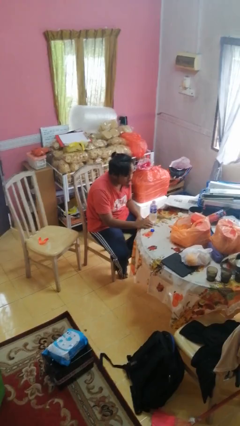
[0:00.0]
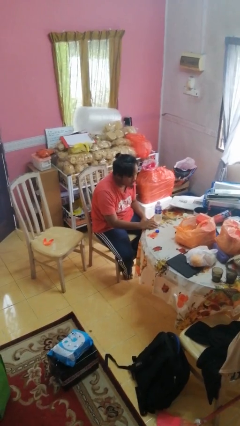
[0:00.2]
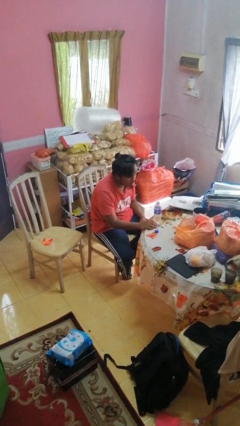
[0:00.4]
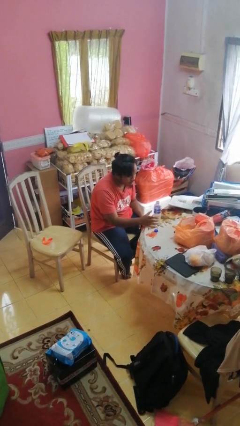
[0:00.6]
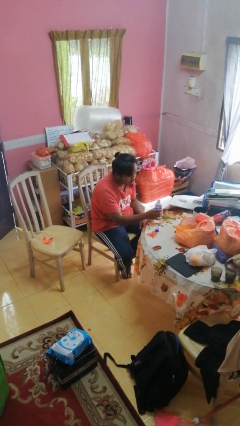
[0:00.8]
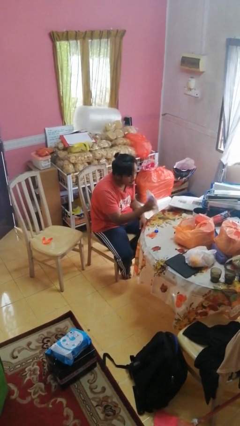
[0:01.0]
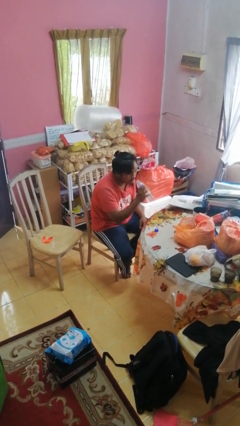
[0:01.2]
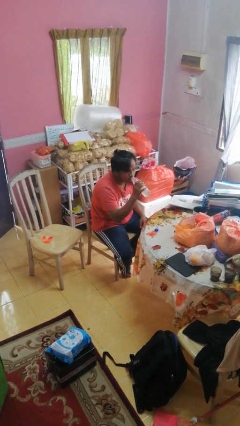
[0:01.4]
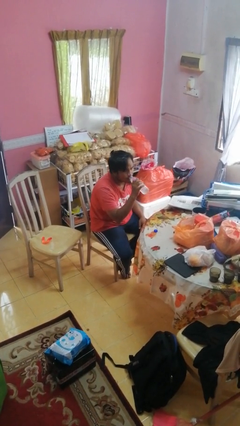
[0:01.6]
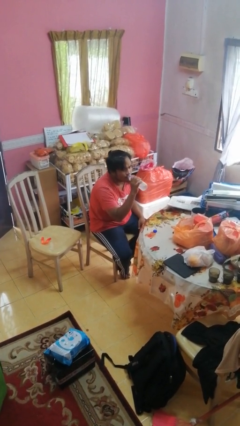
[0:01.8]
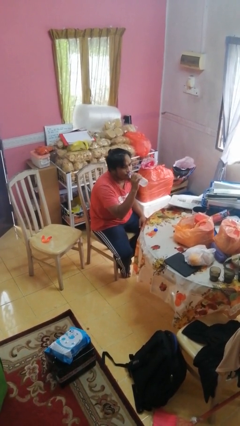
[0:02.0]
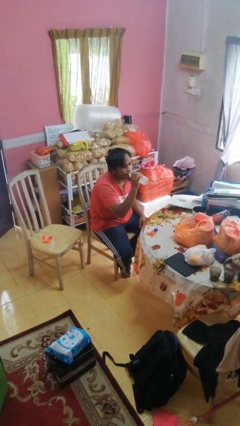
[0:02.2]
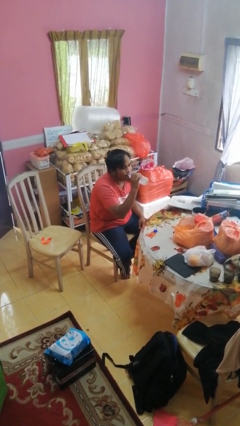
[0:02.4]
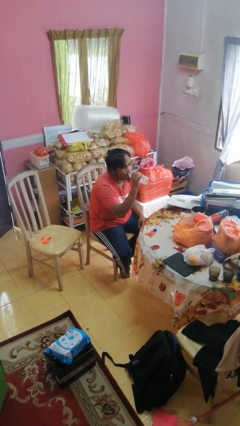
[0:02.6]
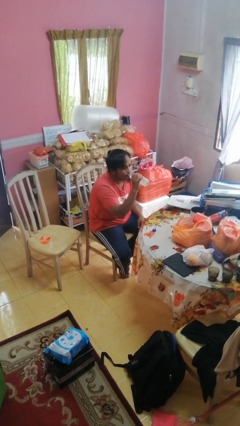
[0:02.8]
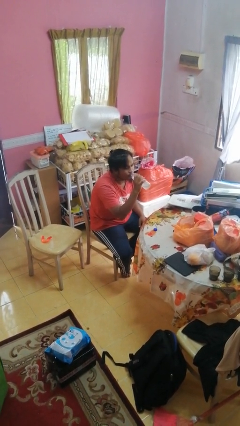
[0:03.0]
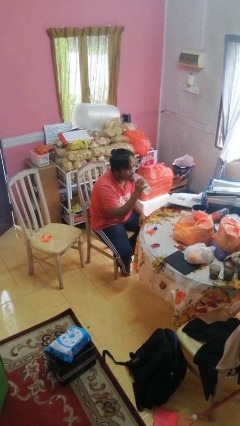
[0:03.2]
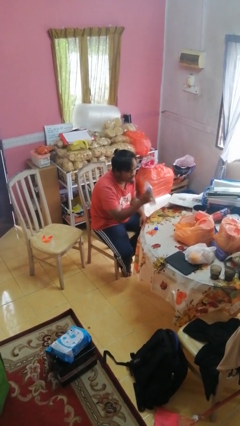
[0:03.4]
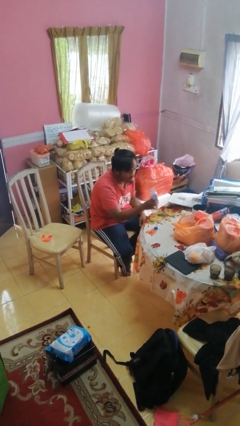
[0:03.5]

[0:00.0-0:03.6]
person drinks from bottle

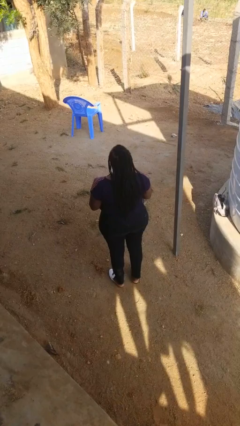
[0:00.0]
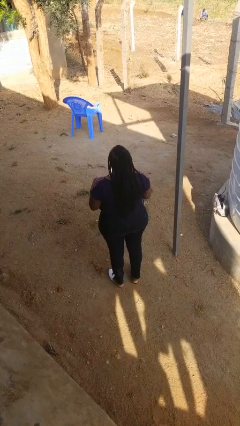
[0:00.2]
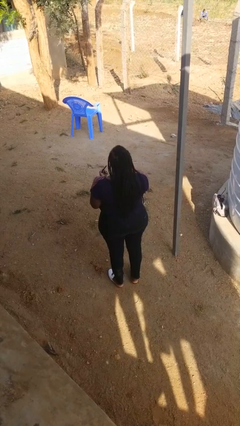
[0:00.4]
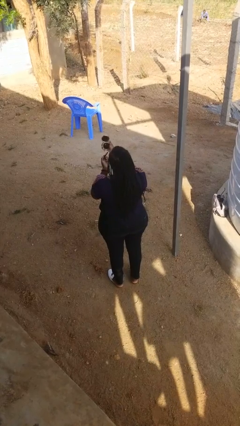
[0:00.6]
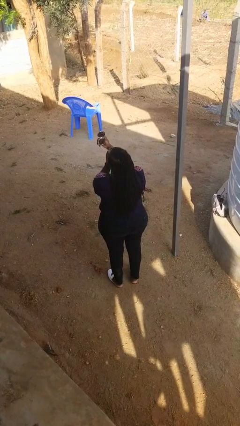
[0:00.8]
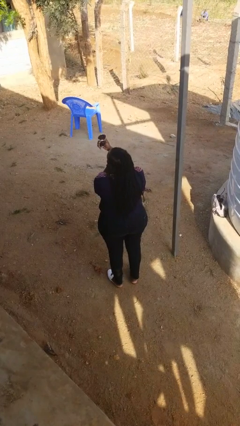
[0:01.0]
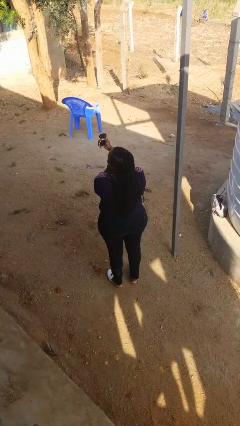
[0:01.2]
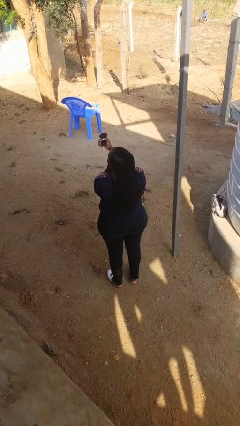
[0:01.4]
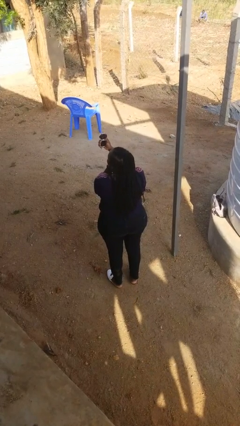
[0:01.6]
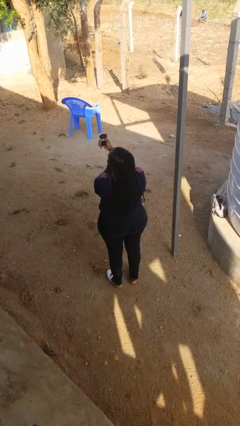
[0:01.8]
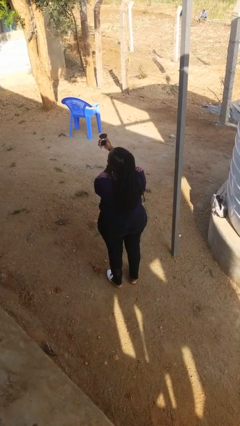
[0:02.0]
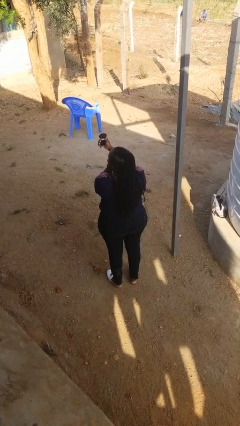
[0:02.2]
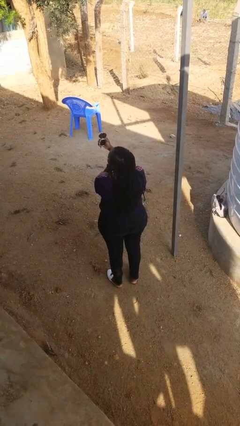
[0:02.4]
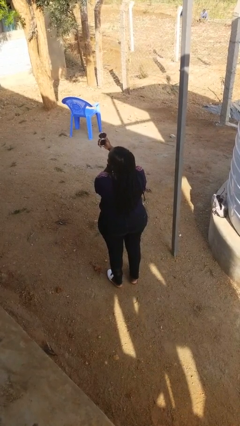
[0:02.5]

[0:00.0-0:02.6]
person applies eye makeup

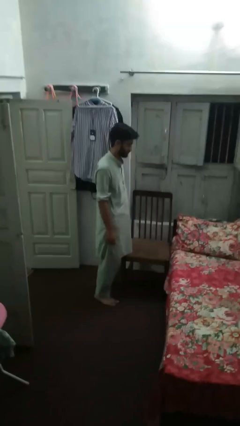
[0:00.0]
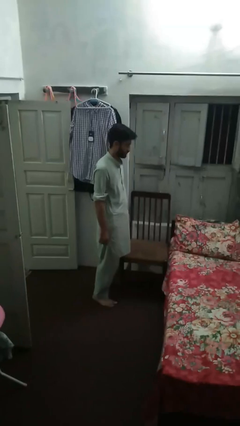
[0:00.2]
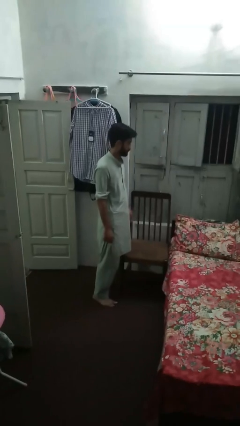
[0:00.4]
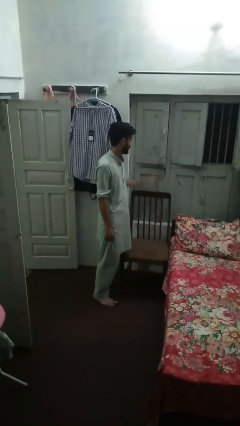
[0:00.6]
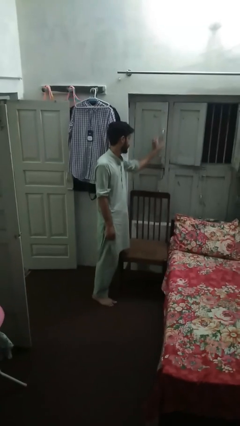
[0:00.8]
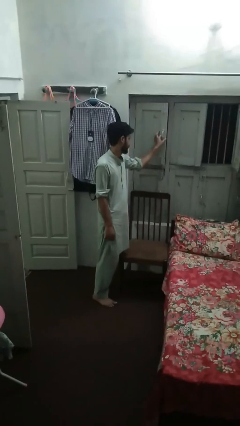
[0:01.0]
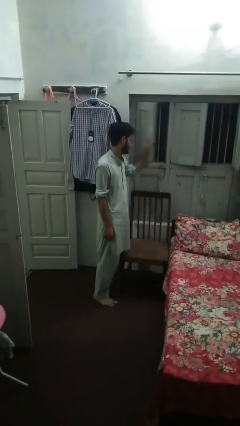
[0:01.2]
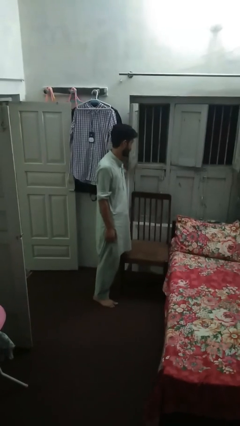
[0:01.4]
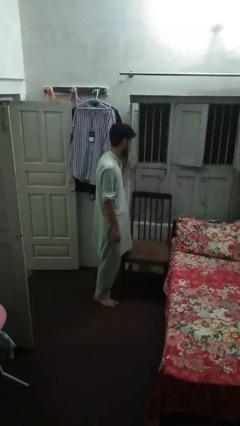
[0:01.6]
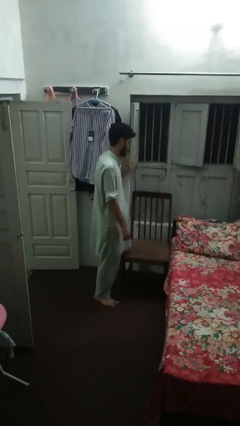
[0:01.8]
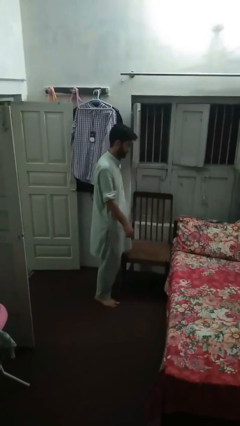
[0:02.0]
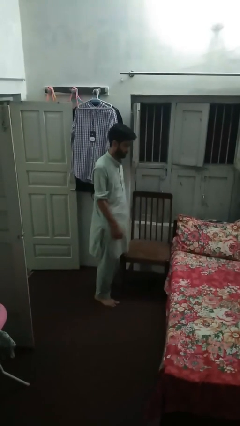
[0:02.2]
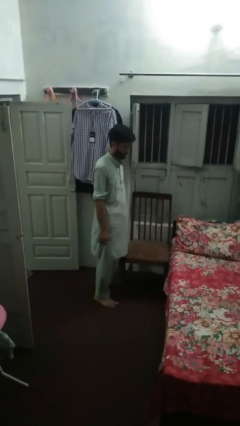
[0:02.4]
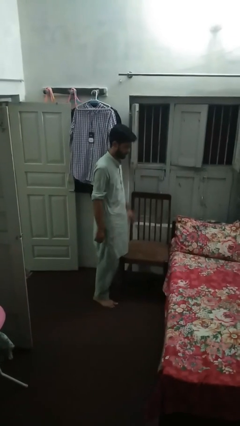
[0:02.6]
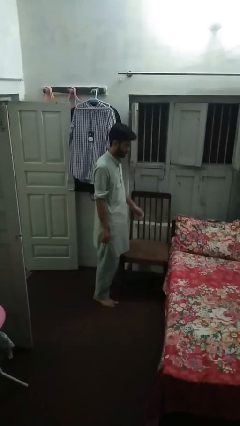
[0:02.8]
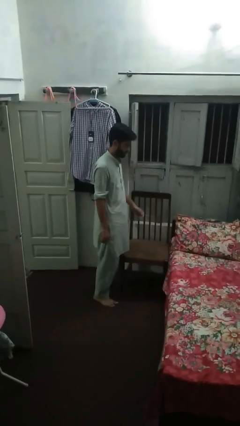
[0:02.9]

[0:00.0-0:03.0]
person opens home window

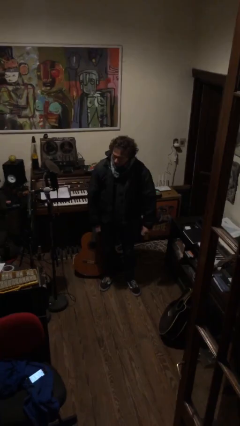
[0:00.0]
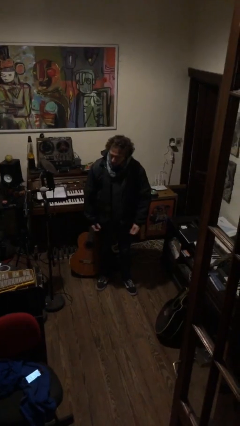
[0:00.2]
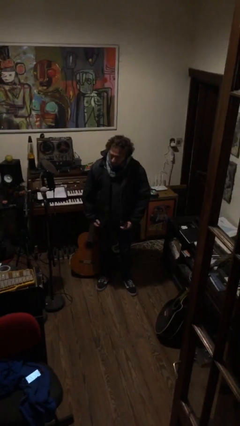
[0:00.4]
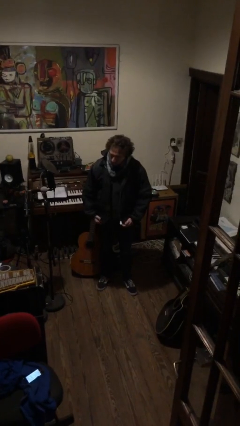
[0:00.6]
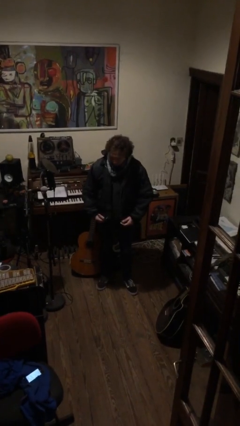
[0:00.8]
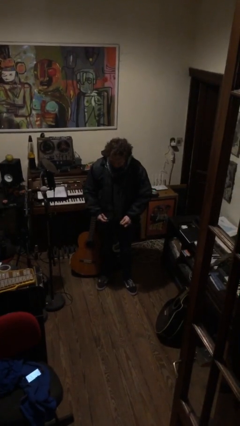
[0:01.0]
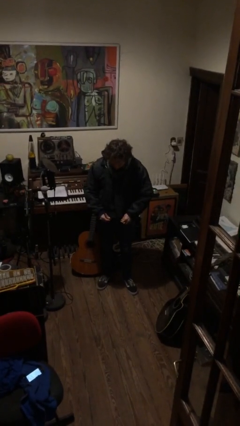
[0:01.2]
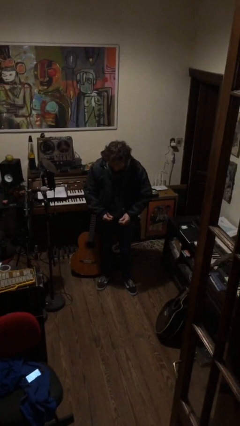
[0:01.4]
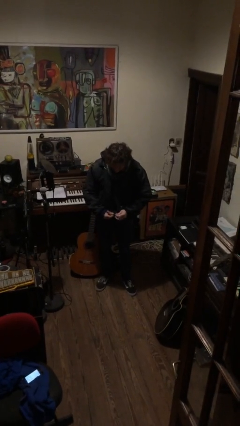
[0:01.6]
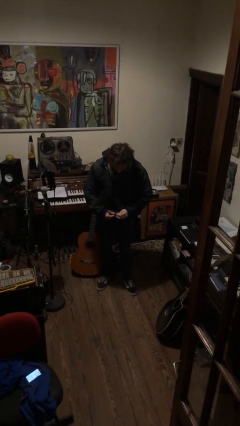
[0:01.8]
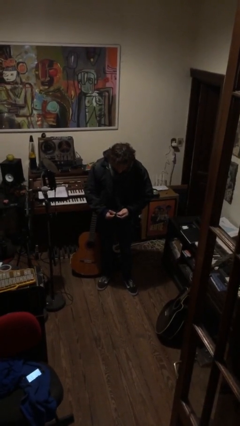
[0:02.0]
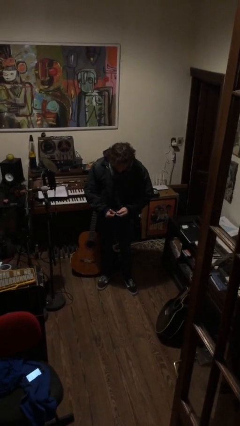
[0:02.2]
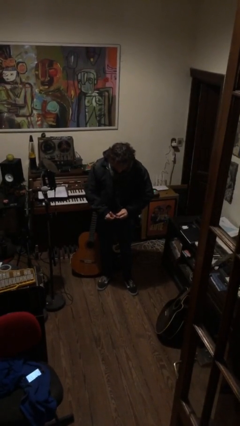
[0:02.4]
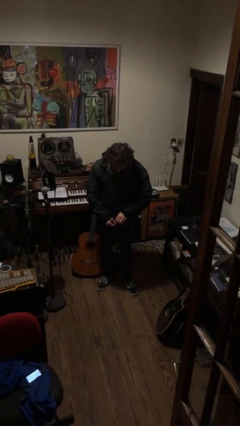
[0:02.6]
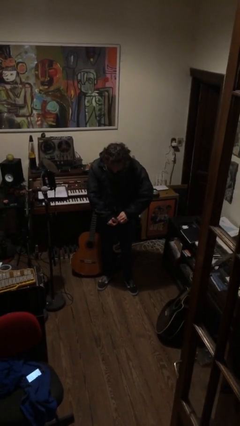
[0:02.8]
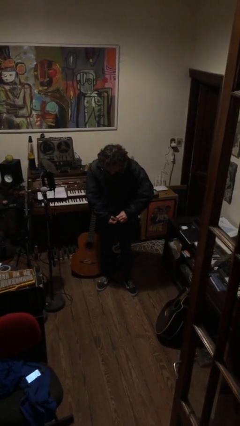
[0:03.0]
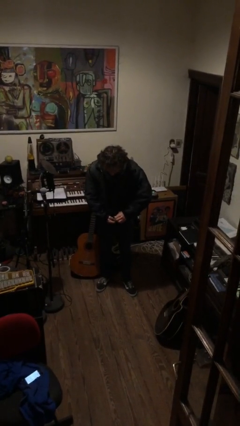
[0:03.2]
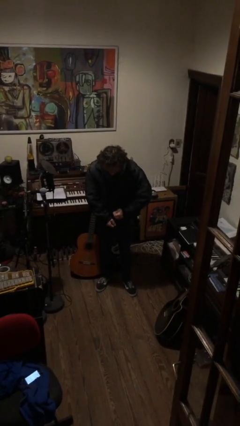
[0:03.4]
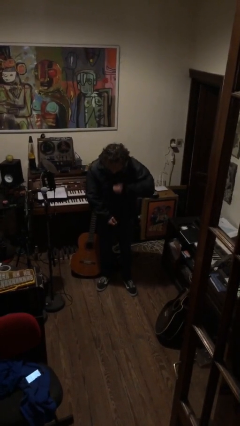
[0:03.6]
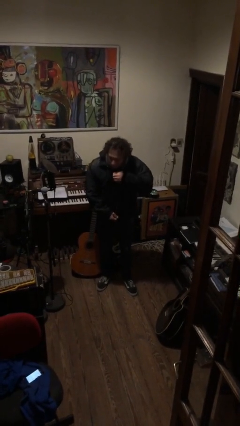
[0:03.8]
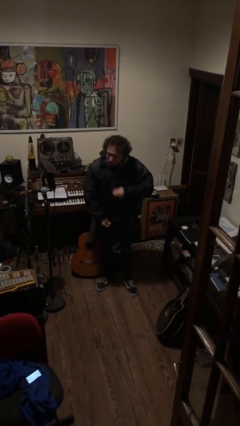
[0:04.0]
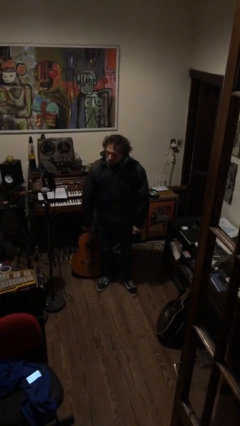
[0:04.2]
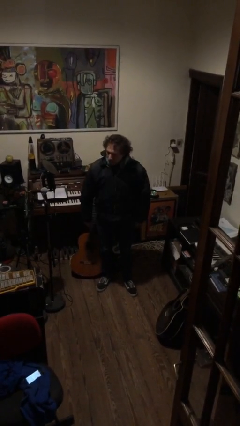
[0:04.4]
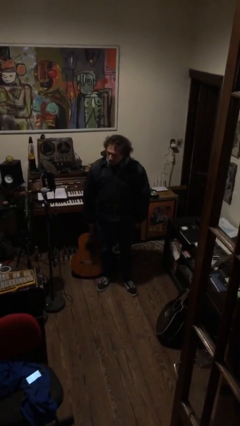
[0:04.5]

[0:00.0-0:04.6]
person zips up jacket

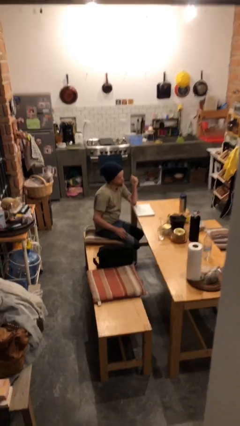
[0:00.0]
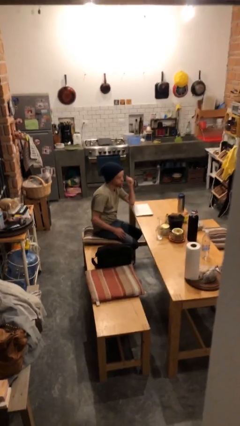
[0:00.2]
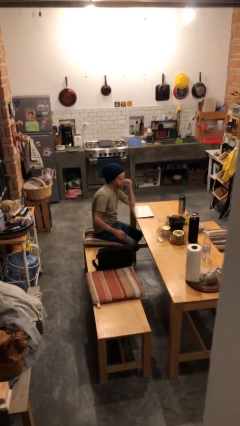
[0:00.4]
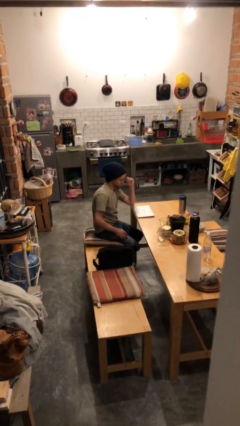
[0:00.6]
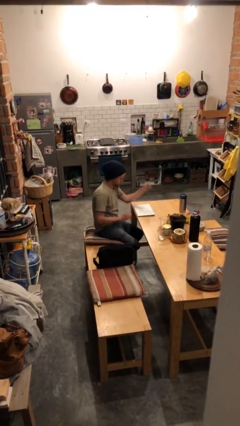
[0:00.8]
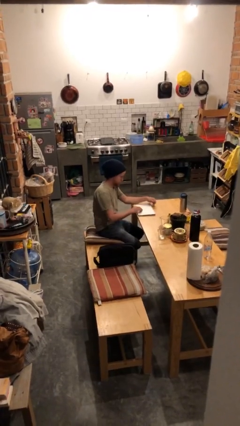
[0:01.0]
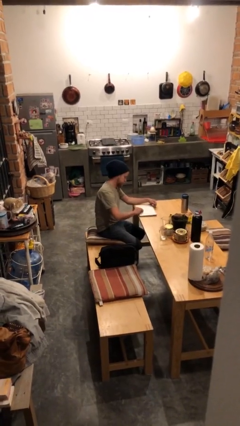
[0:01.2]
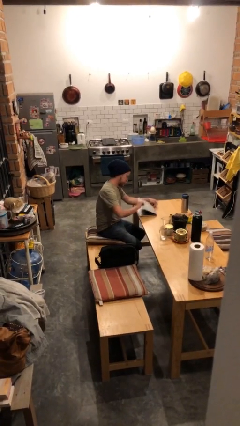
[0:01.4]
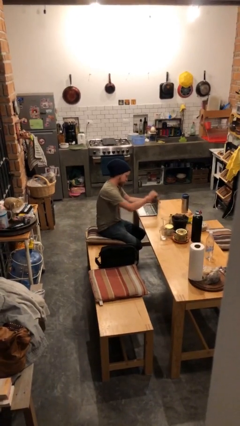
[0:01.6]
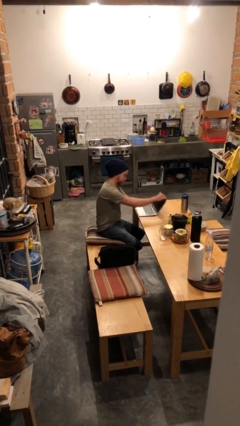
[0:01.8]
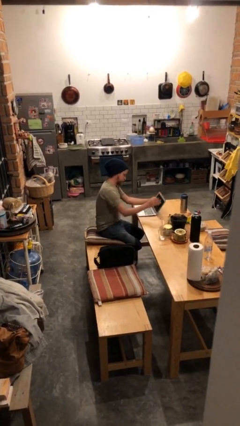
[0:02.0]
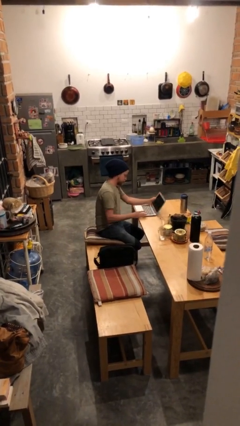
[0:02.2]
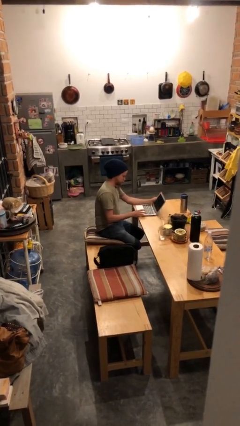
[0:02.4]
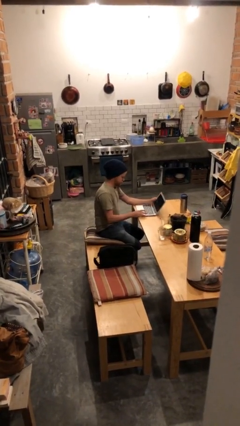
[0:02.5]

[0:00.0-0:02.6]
person interacts with laptop

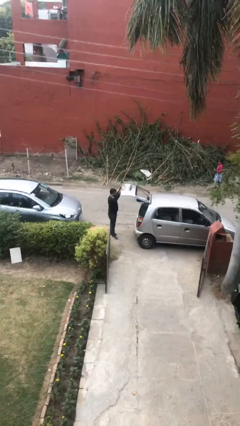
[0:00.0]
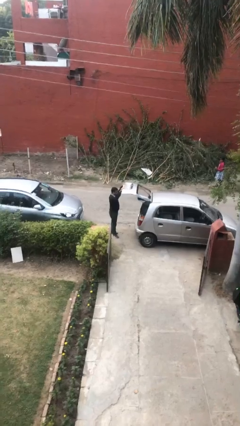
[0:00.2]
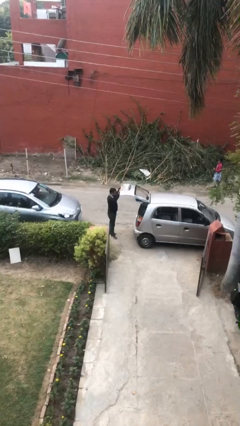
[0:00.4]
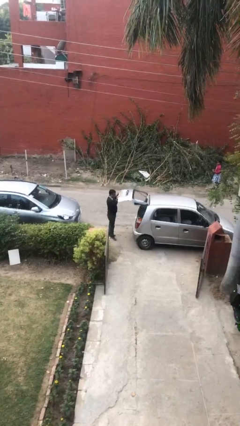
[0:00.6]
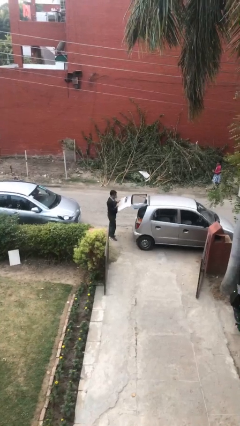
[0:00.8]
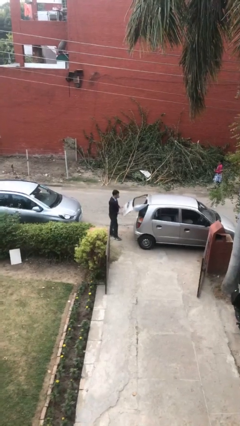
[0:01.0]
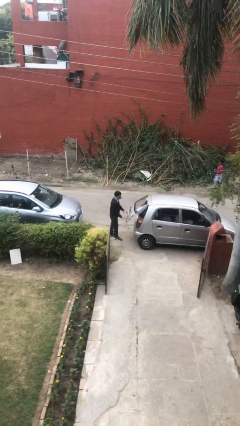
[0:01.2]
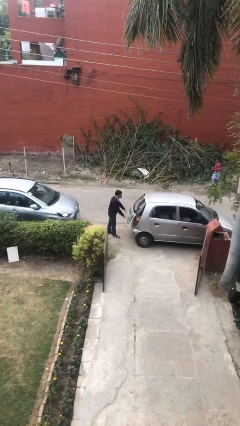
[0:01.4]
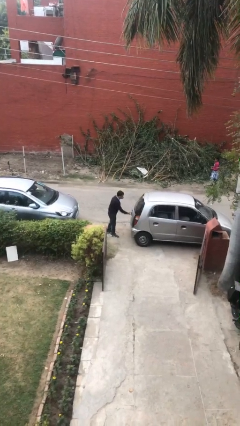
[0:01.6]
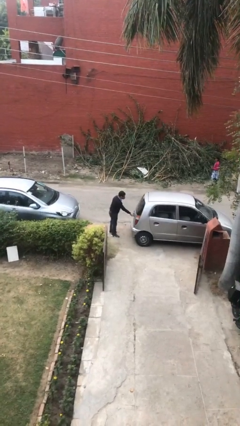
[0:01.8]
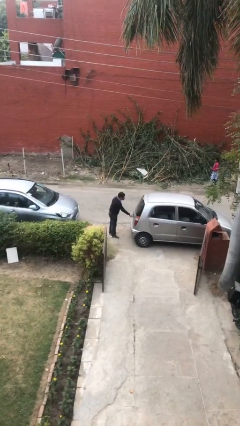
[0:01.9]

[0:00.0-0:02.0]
person closes car trunk
